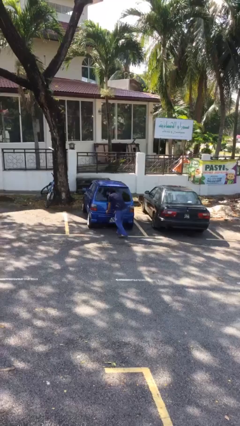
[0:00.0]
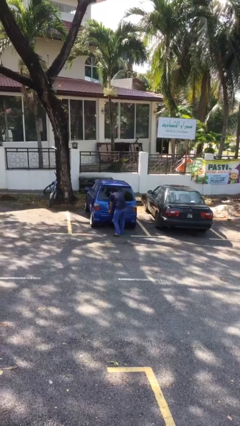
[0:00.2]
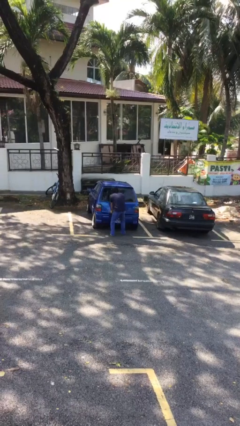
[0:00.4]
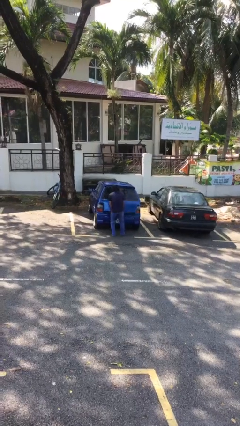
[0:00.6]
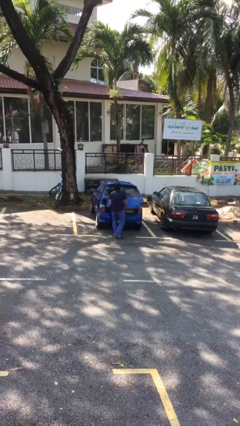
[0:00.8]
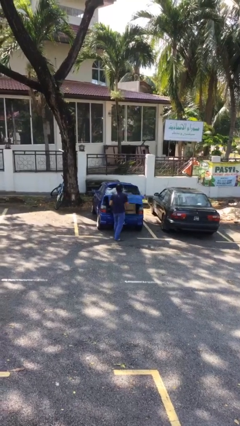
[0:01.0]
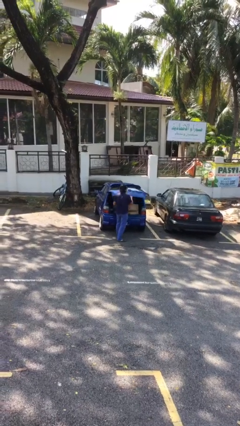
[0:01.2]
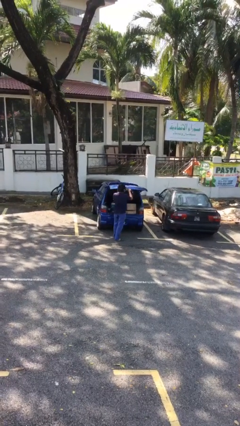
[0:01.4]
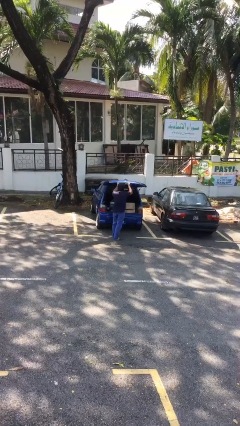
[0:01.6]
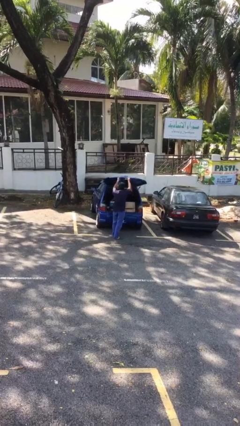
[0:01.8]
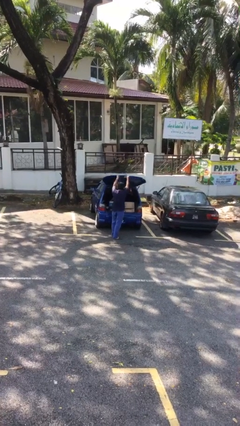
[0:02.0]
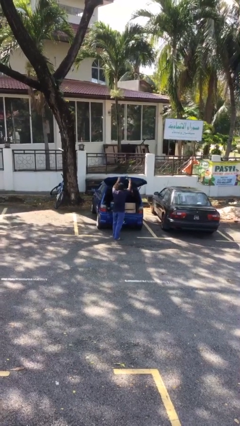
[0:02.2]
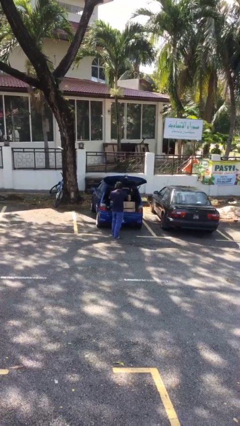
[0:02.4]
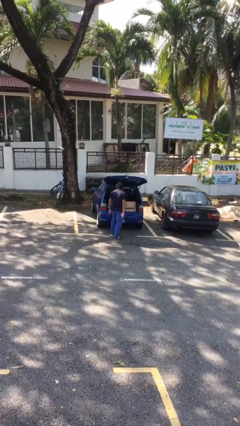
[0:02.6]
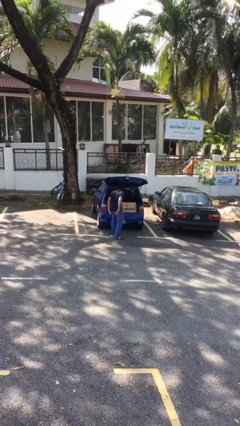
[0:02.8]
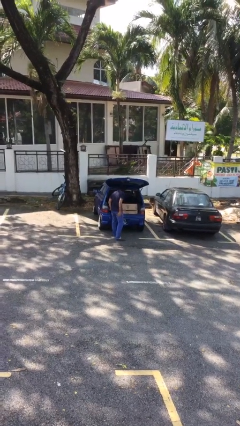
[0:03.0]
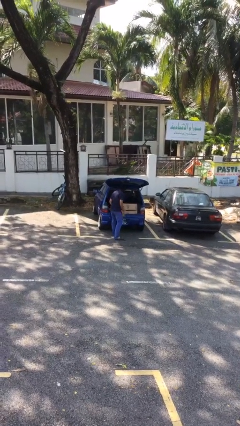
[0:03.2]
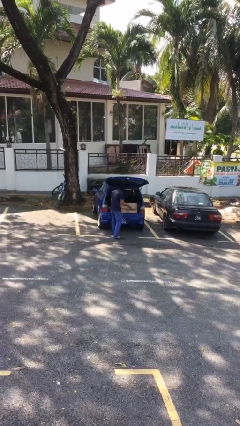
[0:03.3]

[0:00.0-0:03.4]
person opens car trunk

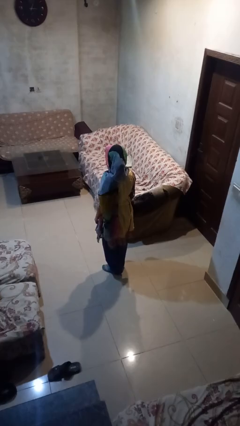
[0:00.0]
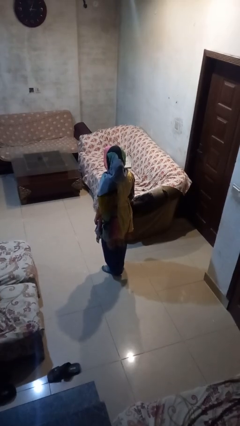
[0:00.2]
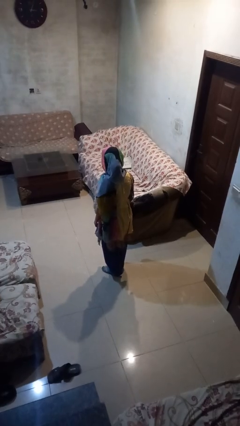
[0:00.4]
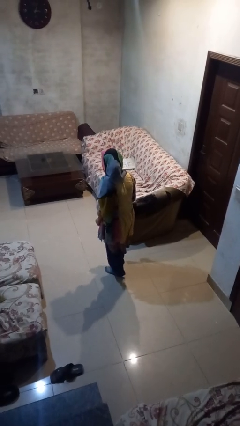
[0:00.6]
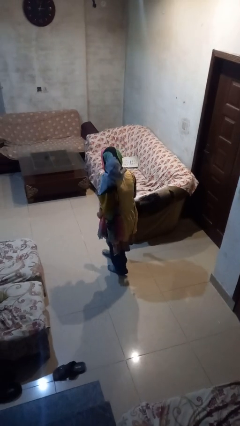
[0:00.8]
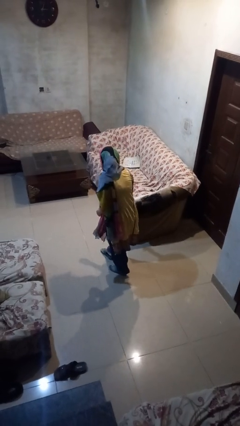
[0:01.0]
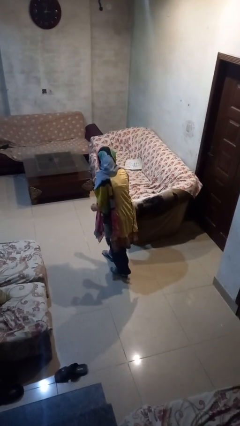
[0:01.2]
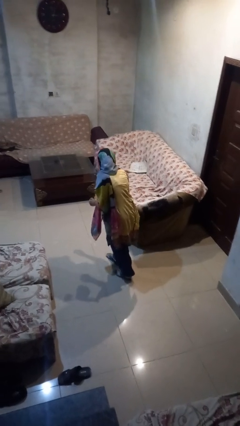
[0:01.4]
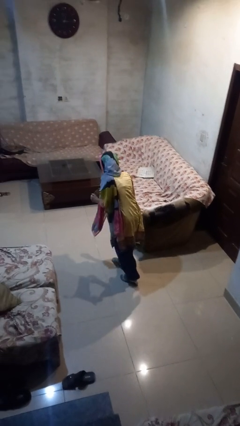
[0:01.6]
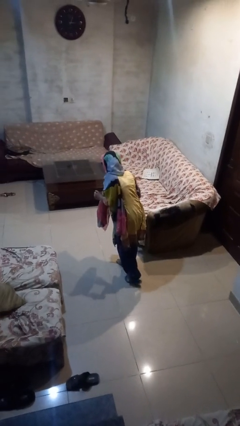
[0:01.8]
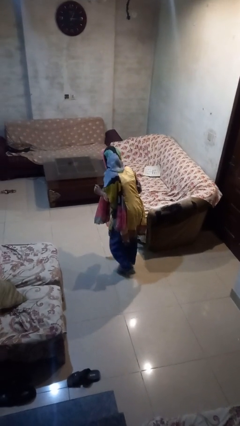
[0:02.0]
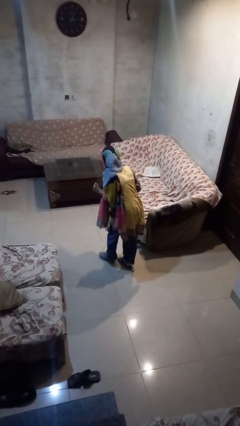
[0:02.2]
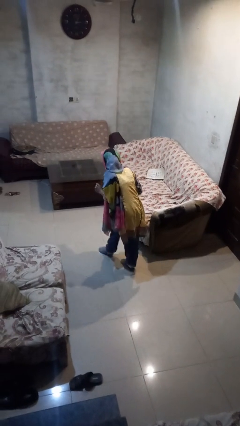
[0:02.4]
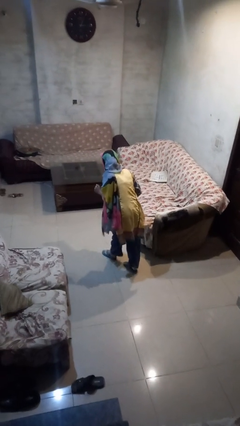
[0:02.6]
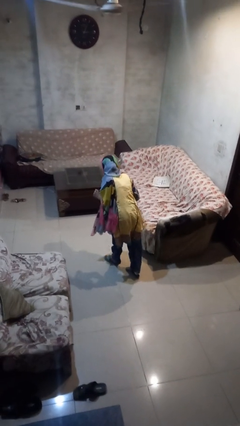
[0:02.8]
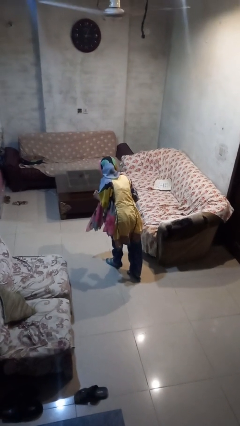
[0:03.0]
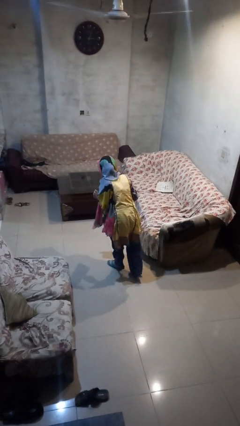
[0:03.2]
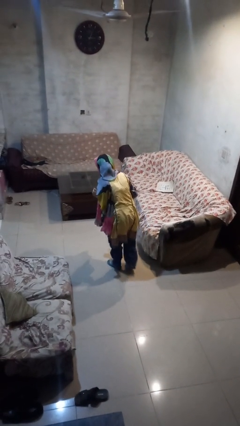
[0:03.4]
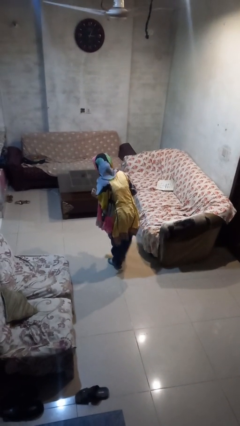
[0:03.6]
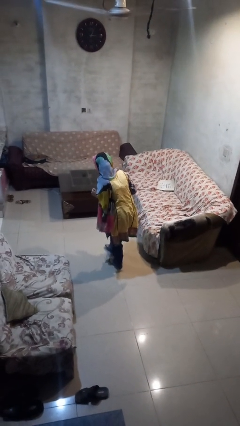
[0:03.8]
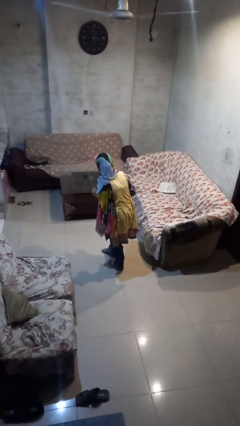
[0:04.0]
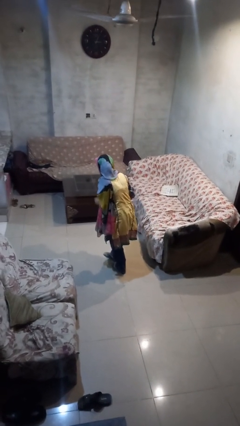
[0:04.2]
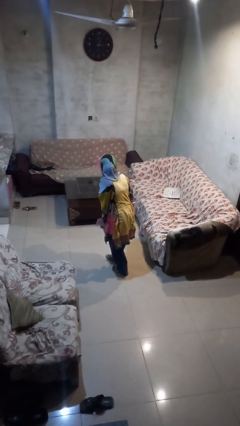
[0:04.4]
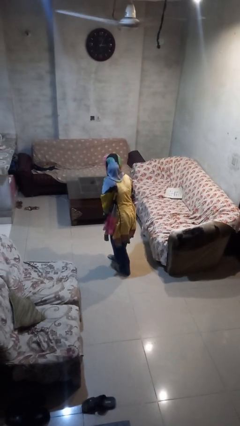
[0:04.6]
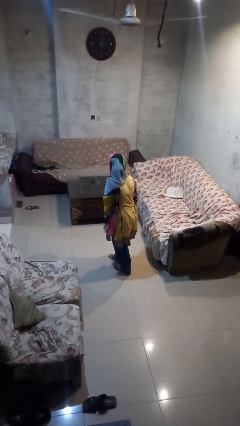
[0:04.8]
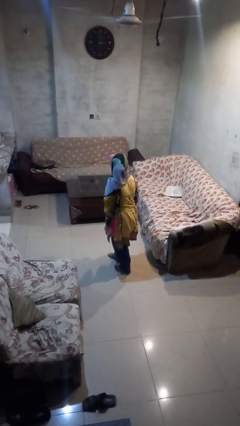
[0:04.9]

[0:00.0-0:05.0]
person walks tiptoe

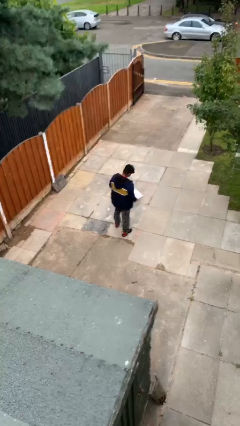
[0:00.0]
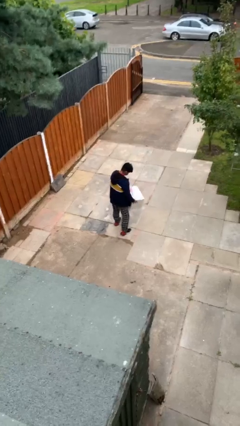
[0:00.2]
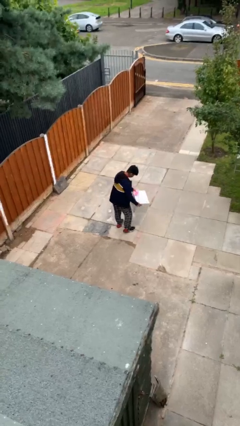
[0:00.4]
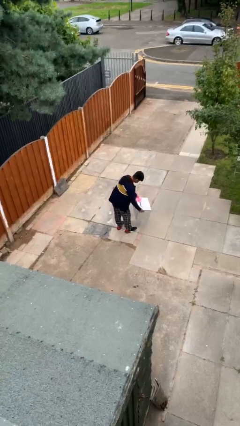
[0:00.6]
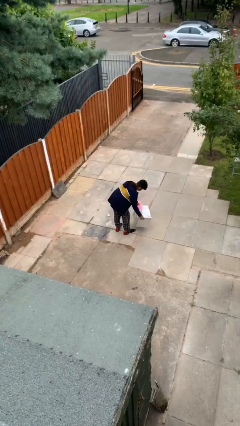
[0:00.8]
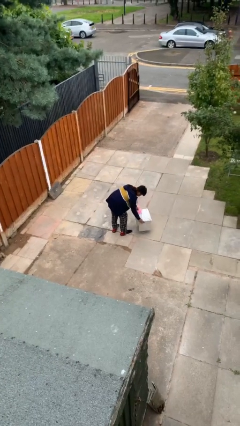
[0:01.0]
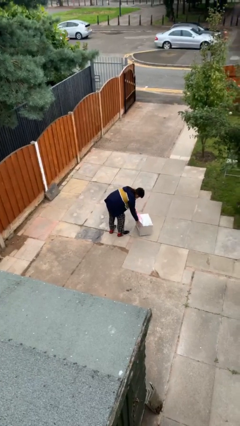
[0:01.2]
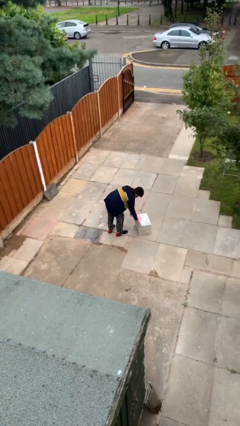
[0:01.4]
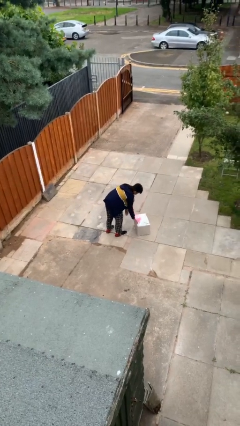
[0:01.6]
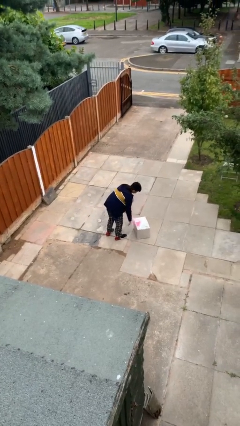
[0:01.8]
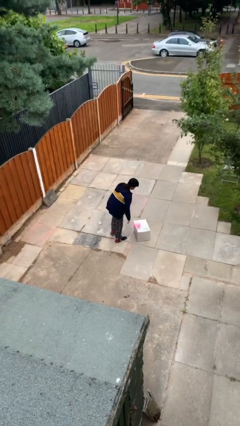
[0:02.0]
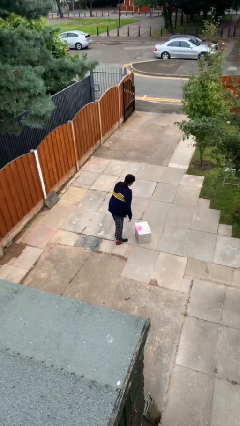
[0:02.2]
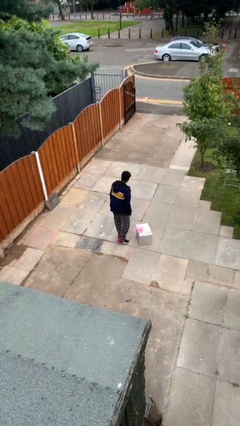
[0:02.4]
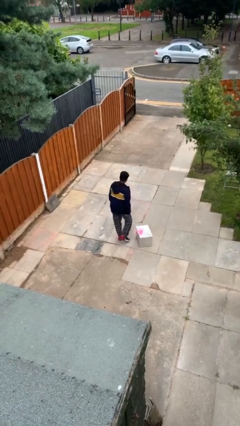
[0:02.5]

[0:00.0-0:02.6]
person puts down object on floor

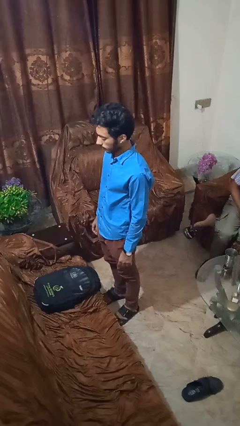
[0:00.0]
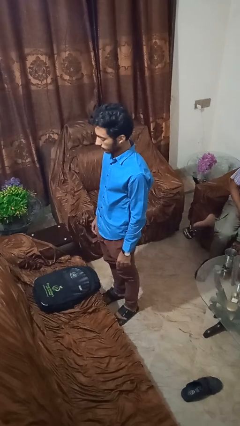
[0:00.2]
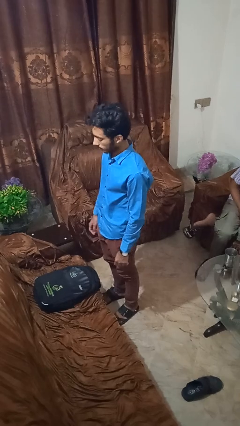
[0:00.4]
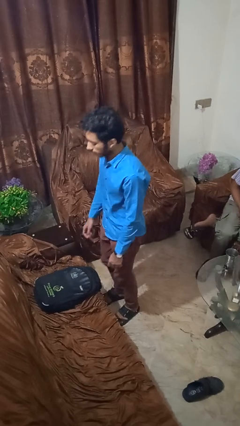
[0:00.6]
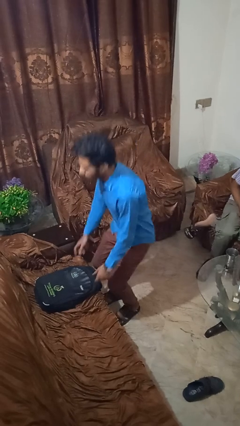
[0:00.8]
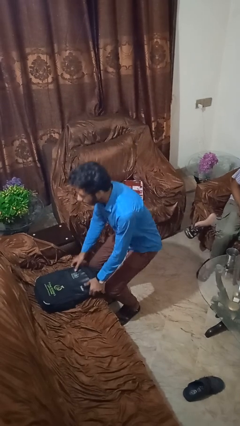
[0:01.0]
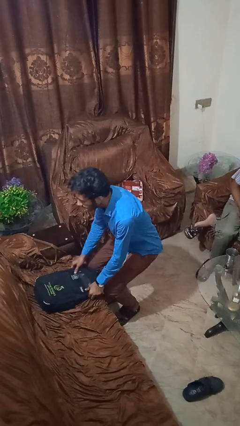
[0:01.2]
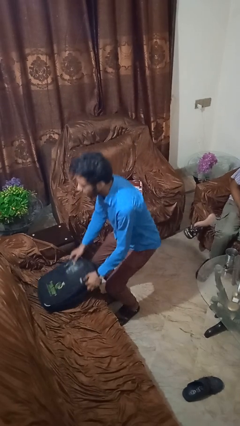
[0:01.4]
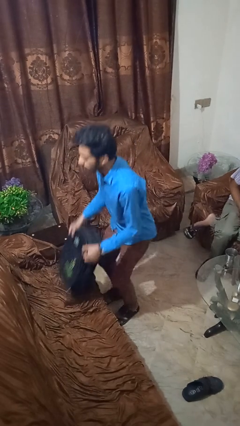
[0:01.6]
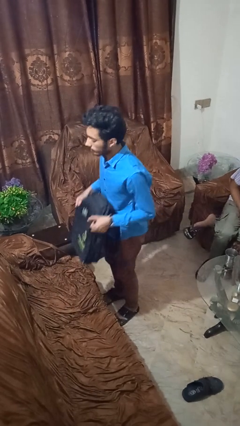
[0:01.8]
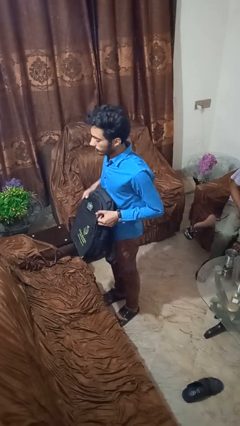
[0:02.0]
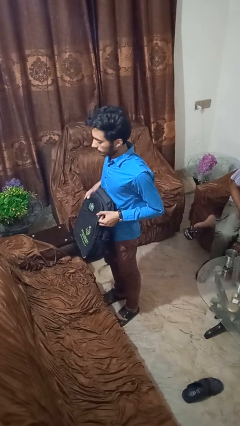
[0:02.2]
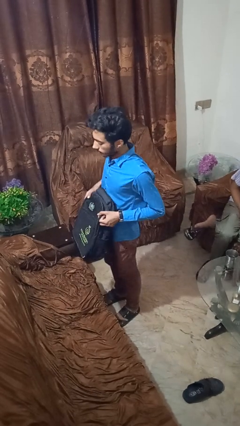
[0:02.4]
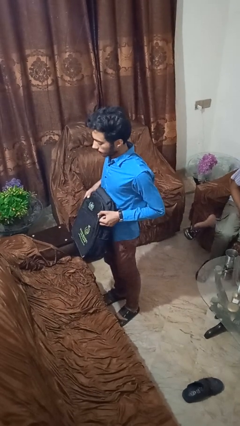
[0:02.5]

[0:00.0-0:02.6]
person picks up object from couch

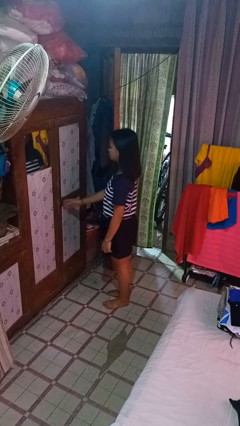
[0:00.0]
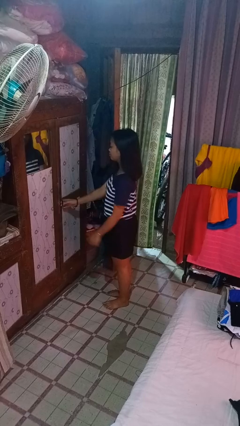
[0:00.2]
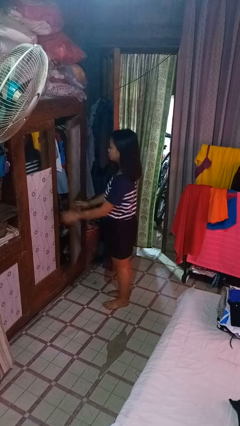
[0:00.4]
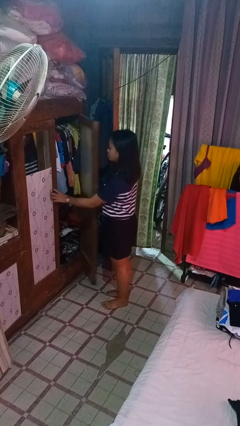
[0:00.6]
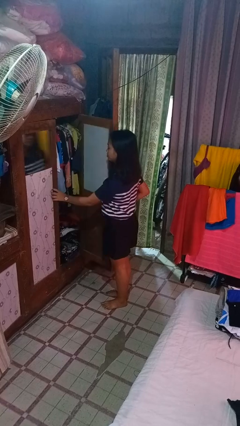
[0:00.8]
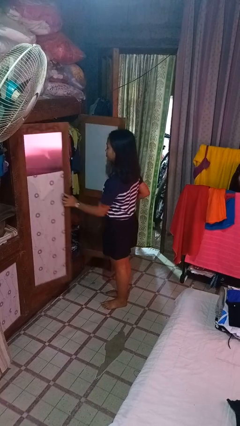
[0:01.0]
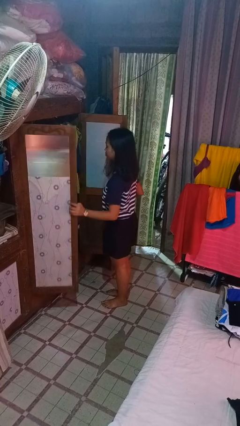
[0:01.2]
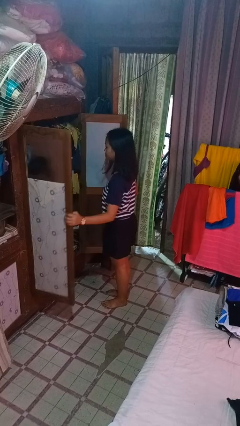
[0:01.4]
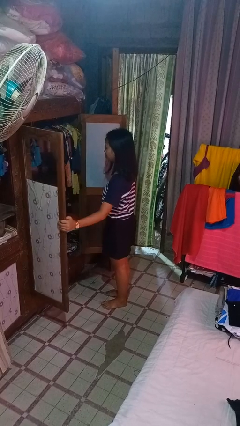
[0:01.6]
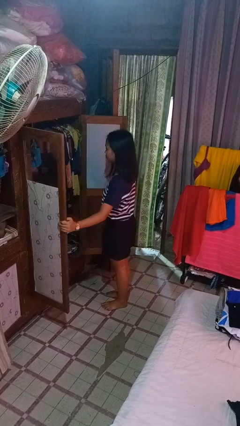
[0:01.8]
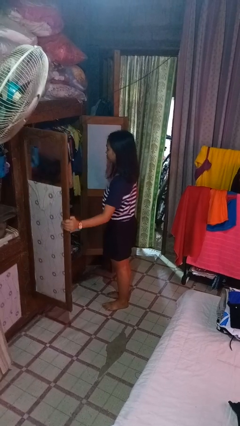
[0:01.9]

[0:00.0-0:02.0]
person opens closet door

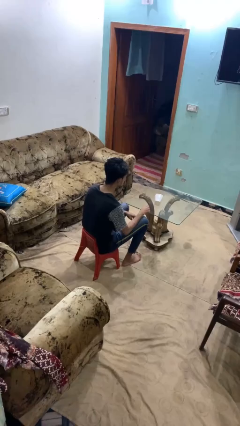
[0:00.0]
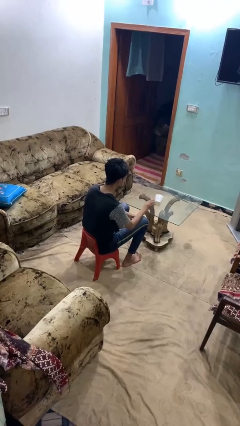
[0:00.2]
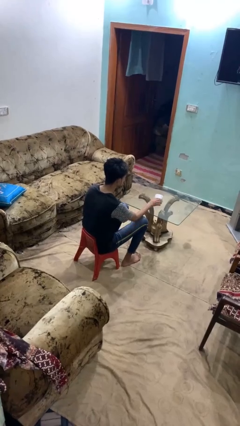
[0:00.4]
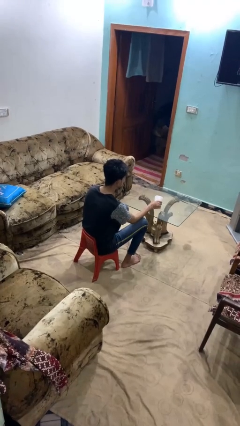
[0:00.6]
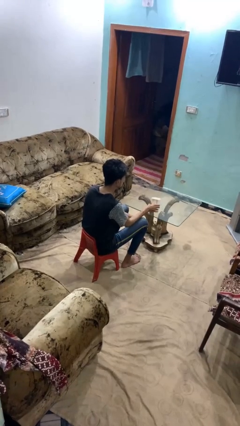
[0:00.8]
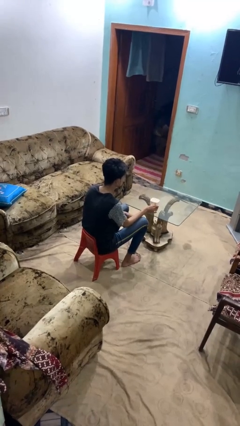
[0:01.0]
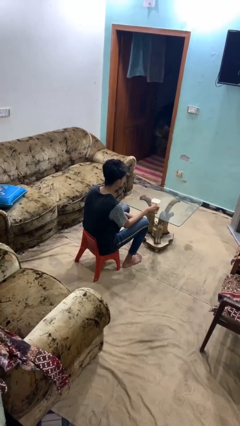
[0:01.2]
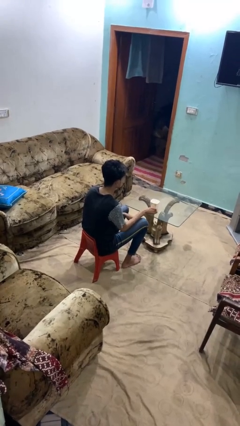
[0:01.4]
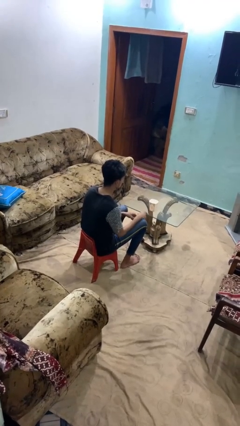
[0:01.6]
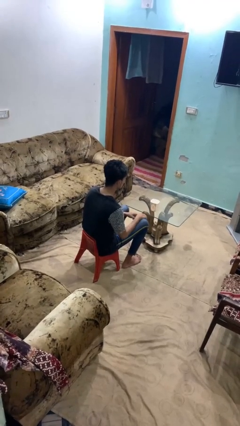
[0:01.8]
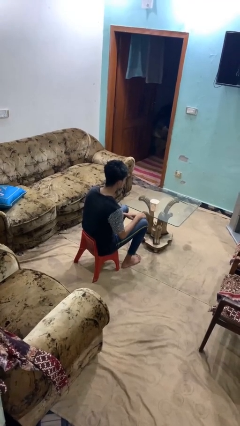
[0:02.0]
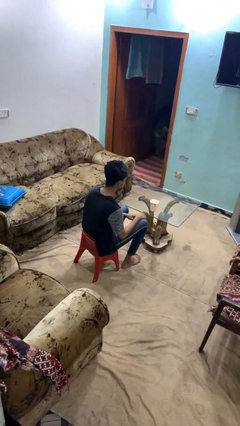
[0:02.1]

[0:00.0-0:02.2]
person sets upright glass
